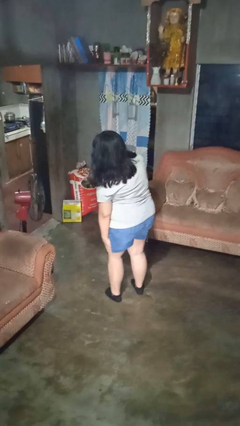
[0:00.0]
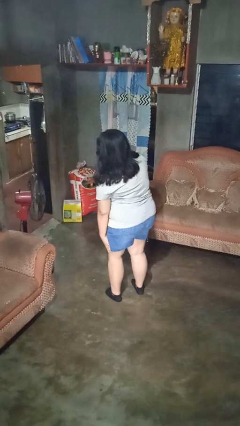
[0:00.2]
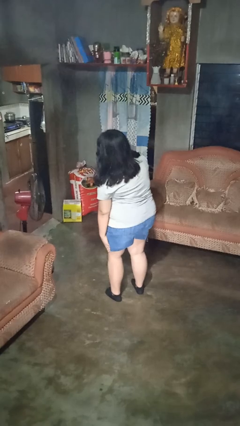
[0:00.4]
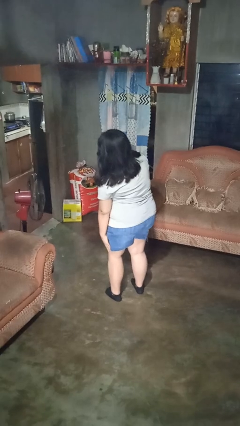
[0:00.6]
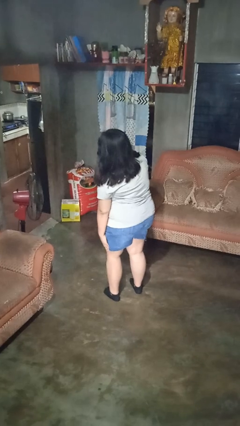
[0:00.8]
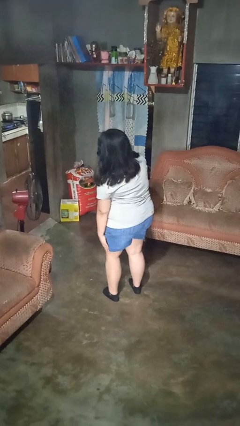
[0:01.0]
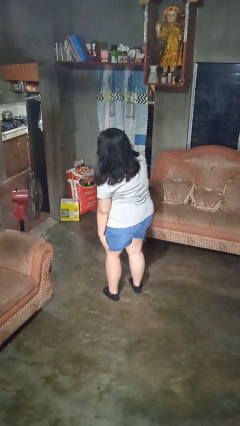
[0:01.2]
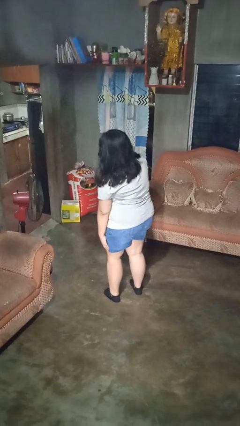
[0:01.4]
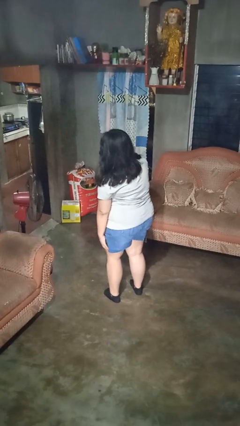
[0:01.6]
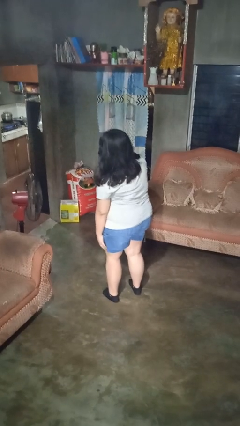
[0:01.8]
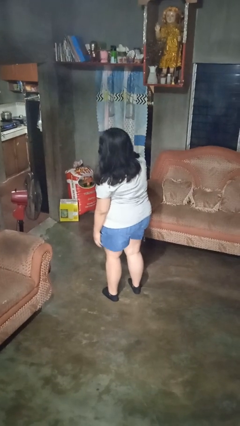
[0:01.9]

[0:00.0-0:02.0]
person swats bug

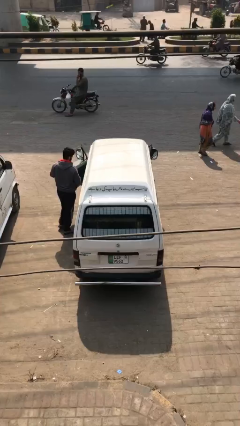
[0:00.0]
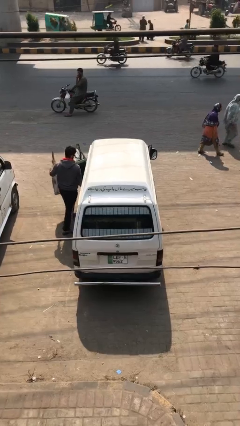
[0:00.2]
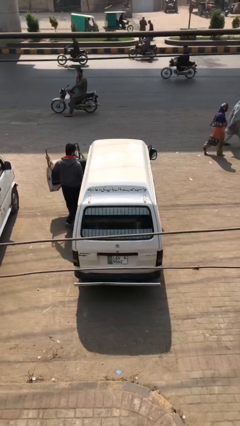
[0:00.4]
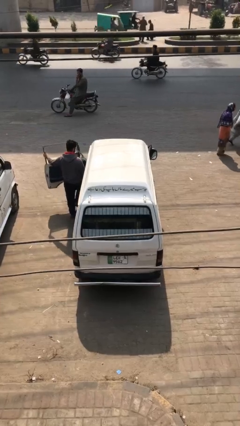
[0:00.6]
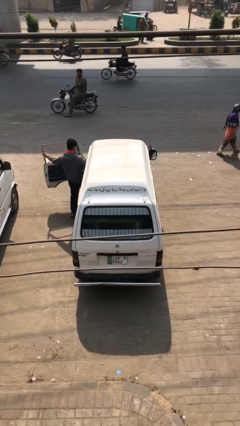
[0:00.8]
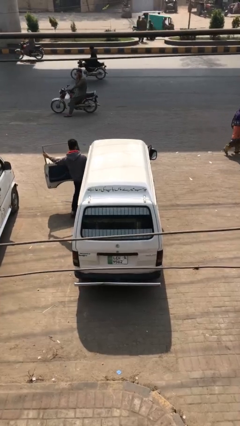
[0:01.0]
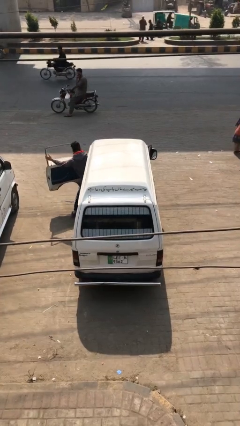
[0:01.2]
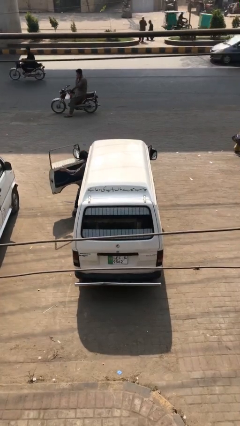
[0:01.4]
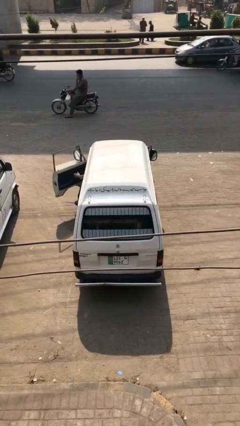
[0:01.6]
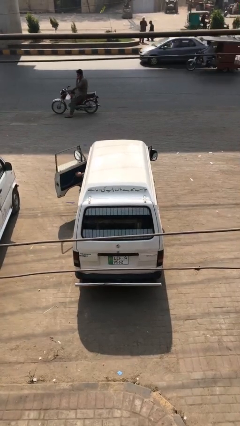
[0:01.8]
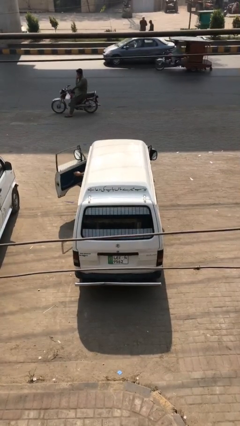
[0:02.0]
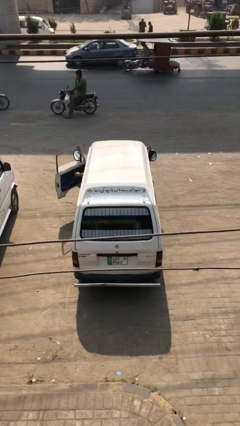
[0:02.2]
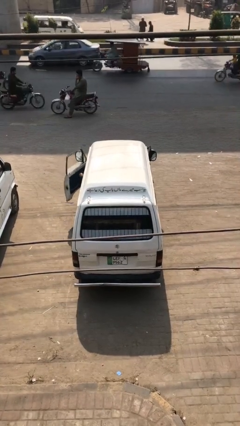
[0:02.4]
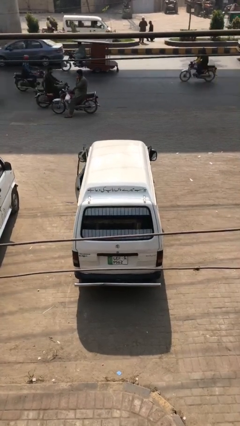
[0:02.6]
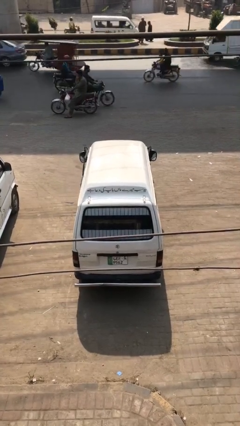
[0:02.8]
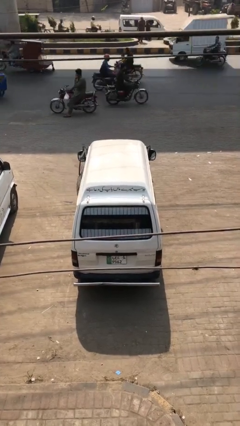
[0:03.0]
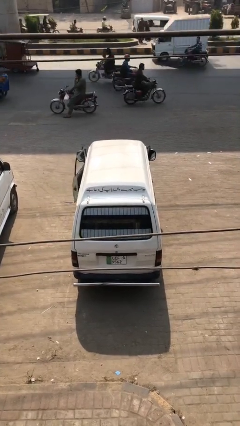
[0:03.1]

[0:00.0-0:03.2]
car picks up person

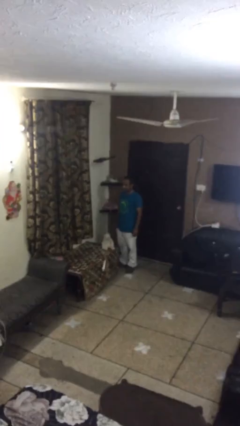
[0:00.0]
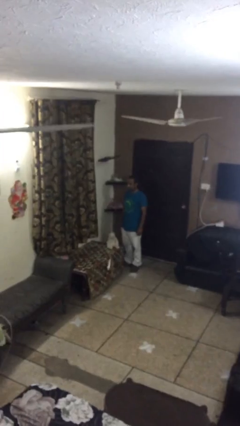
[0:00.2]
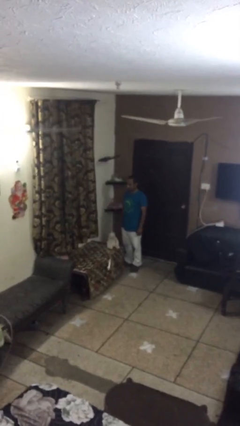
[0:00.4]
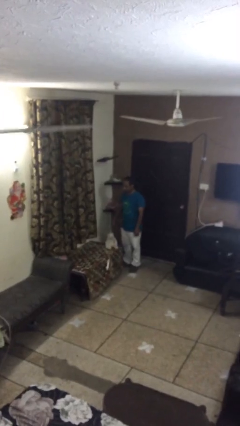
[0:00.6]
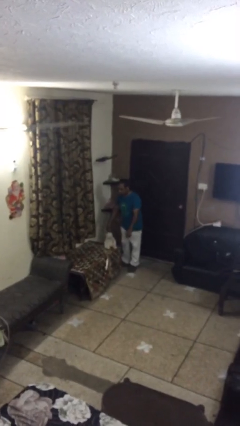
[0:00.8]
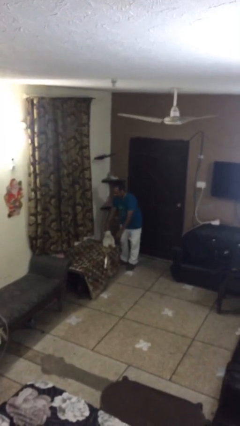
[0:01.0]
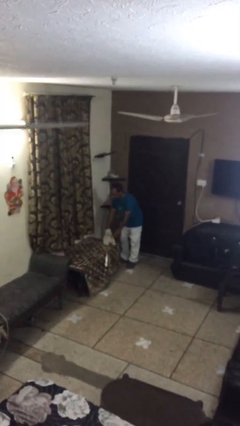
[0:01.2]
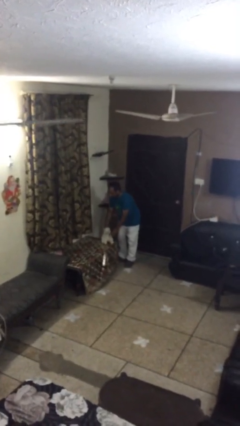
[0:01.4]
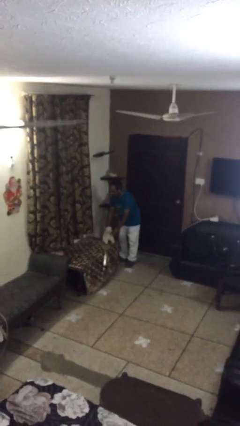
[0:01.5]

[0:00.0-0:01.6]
person picks up object from table

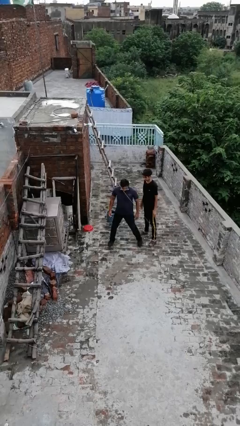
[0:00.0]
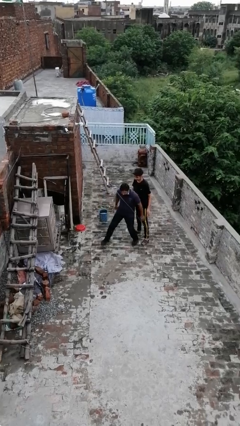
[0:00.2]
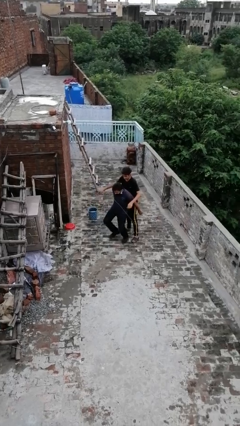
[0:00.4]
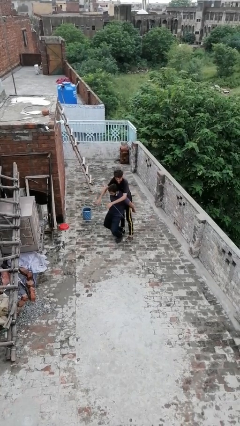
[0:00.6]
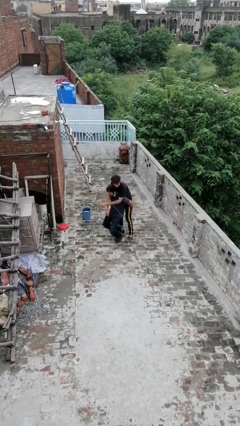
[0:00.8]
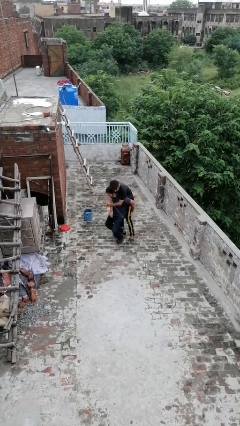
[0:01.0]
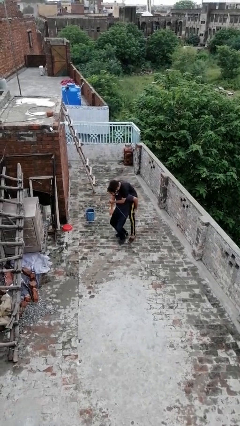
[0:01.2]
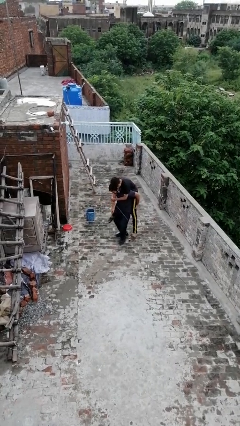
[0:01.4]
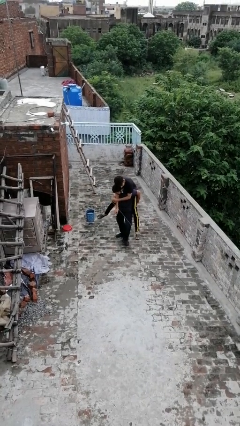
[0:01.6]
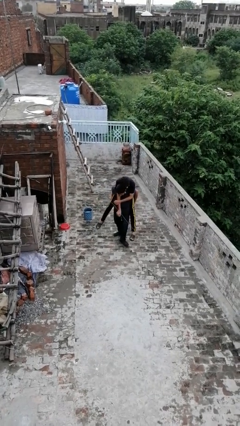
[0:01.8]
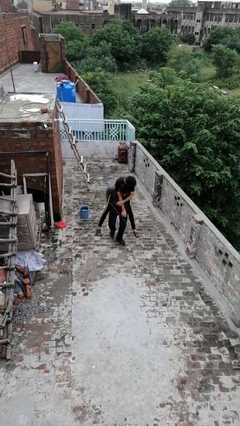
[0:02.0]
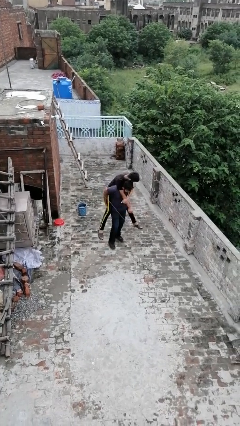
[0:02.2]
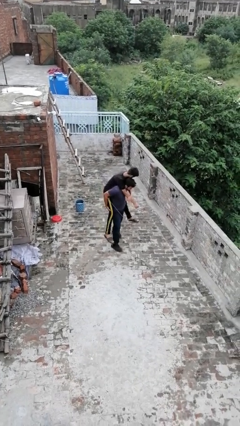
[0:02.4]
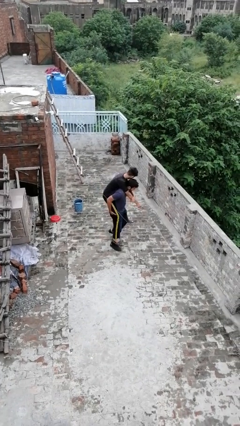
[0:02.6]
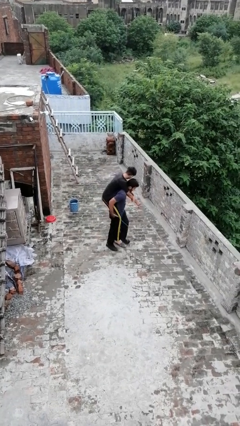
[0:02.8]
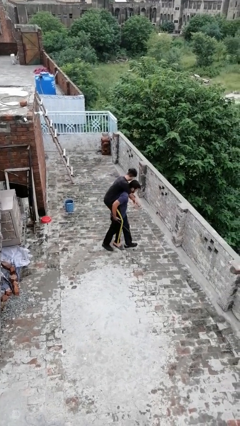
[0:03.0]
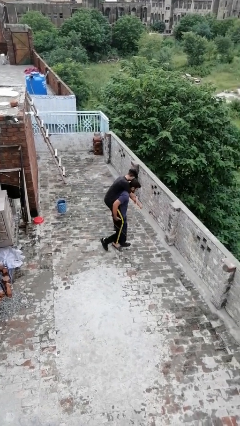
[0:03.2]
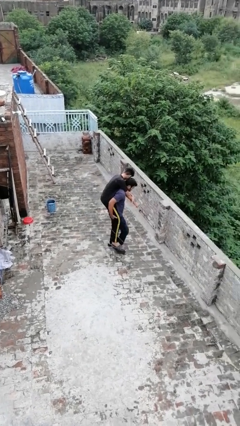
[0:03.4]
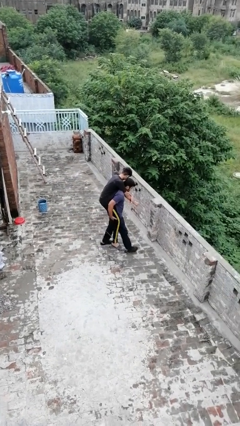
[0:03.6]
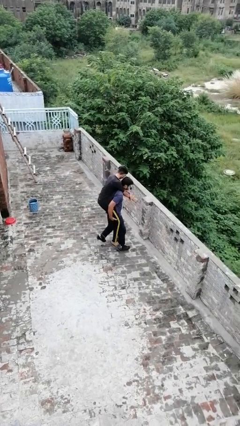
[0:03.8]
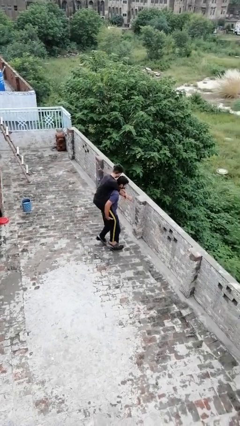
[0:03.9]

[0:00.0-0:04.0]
person carries person on back

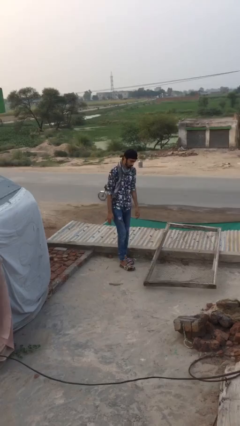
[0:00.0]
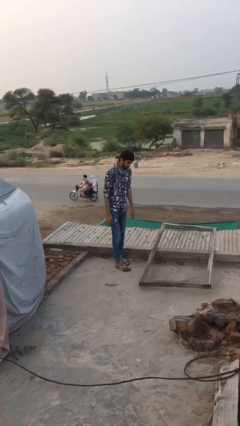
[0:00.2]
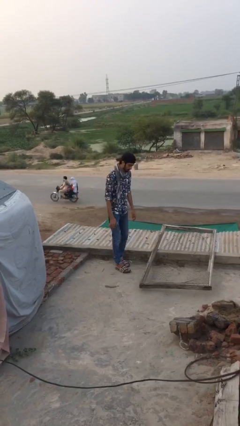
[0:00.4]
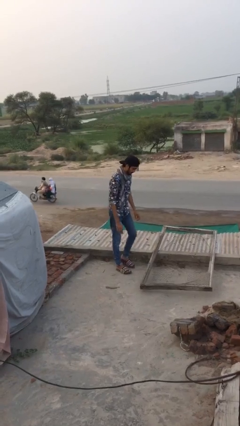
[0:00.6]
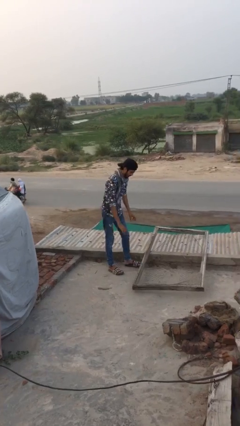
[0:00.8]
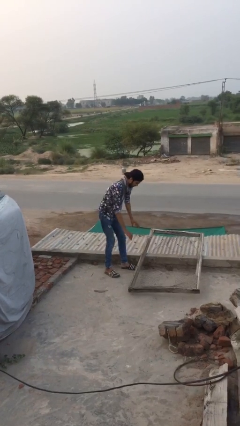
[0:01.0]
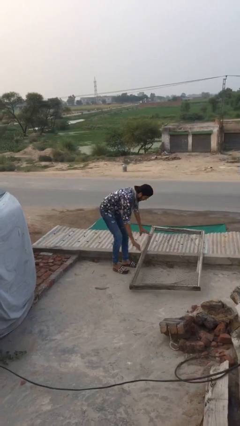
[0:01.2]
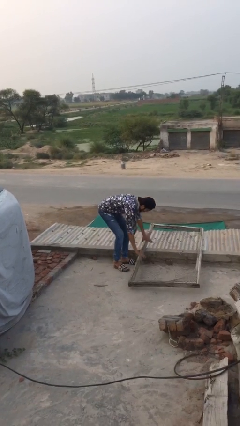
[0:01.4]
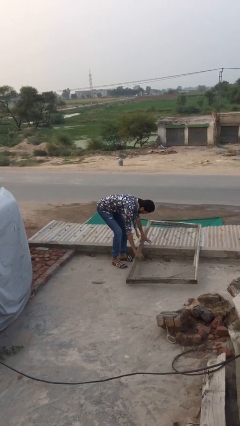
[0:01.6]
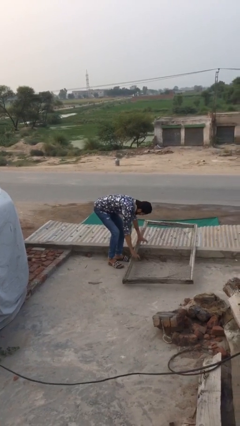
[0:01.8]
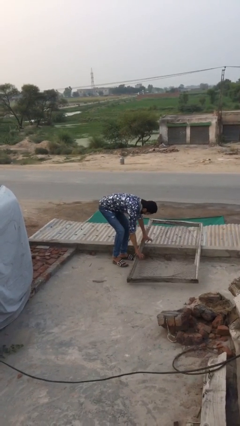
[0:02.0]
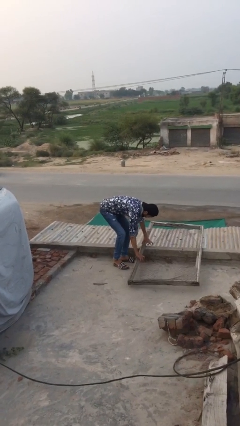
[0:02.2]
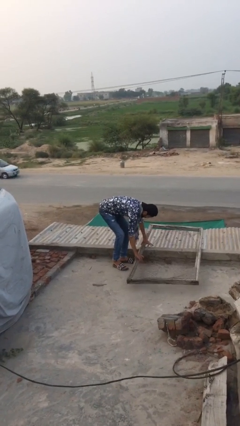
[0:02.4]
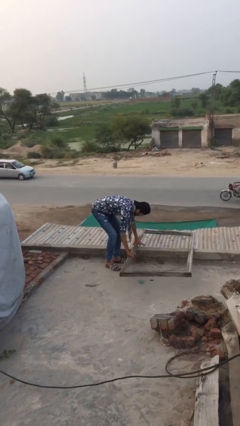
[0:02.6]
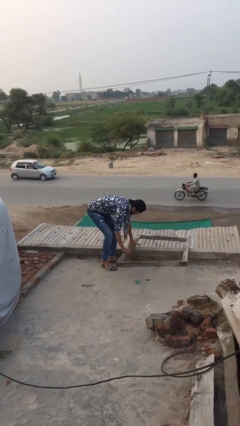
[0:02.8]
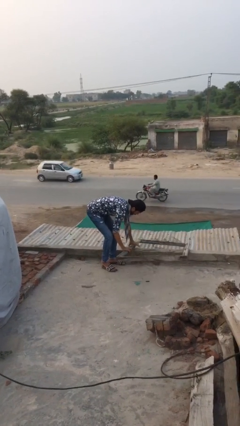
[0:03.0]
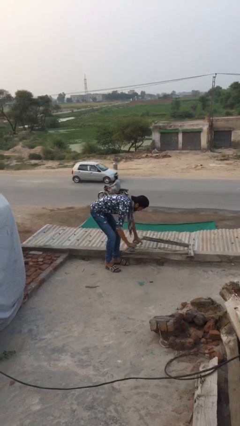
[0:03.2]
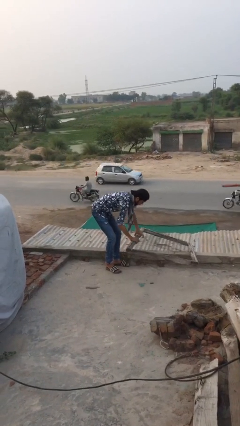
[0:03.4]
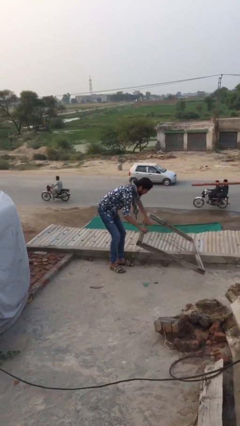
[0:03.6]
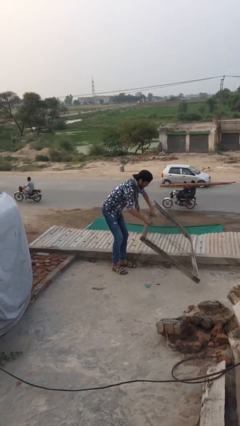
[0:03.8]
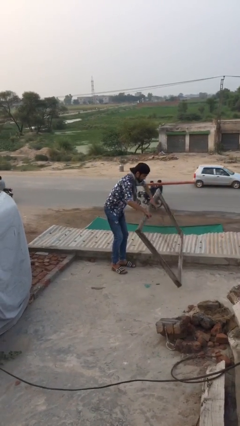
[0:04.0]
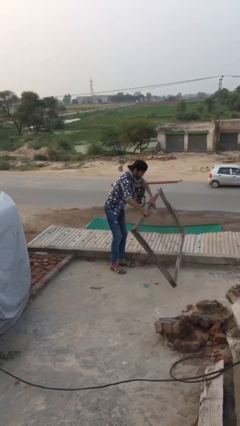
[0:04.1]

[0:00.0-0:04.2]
person picks up object from floor

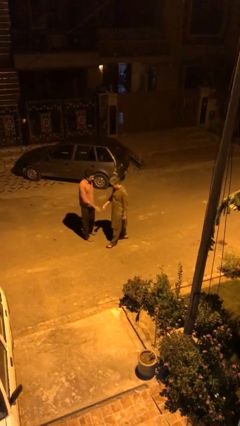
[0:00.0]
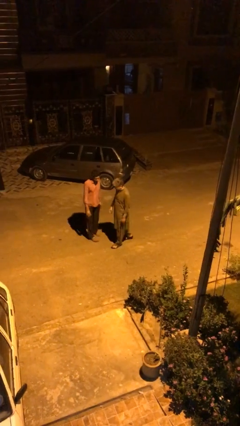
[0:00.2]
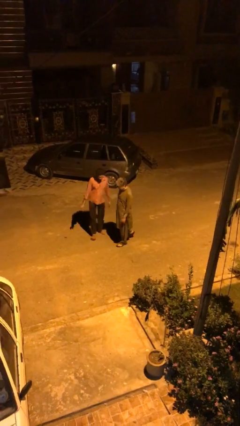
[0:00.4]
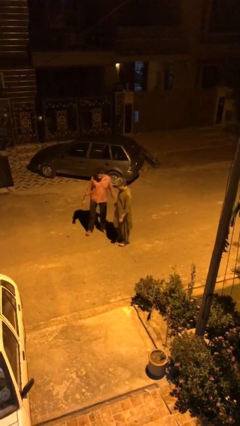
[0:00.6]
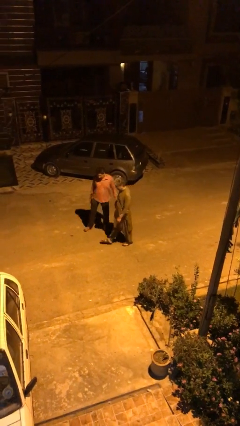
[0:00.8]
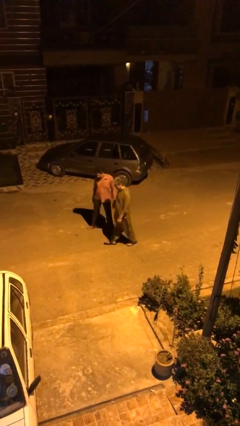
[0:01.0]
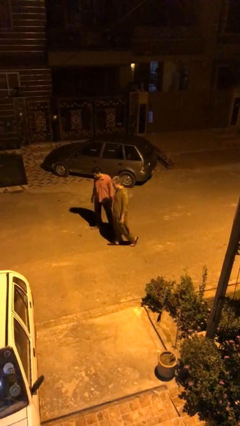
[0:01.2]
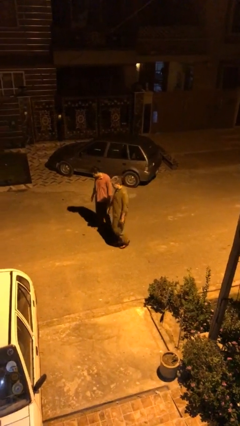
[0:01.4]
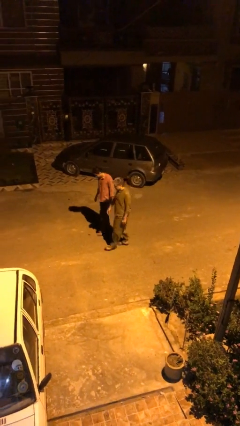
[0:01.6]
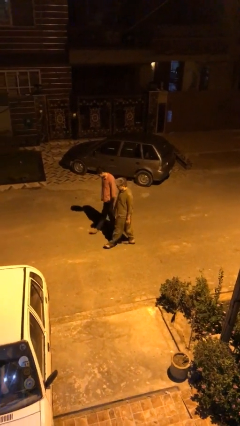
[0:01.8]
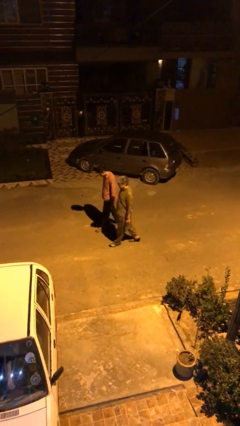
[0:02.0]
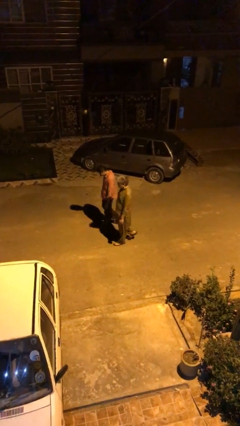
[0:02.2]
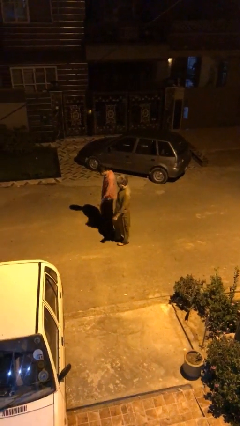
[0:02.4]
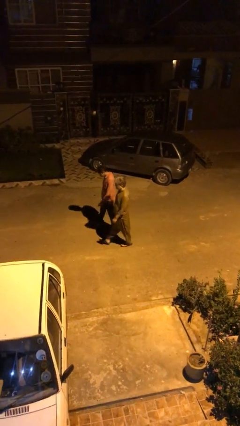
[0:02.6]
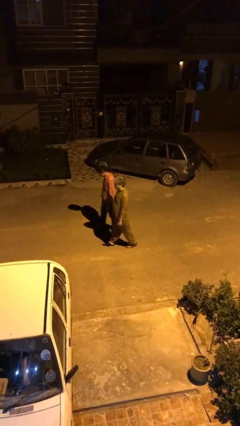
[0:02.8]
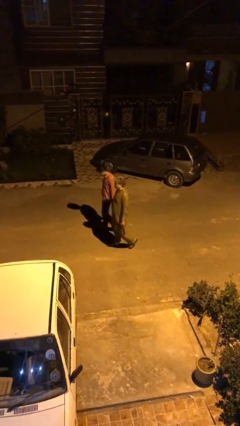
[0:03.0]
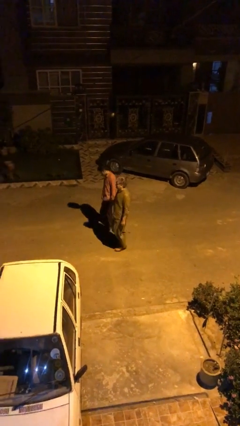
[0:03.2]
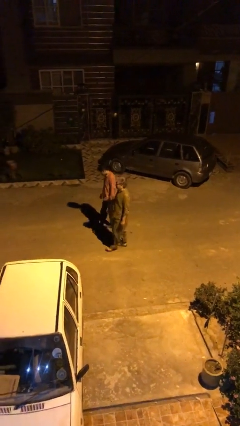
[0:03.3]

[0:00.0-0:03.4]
person talks to person
